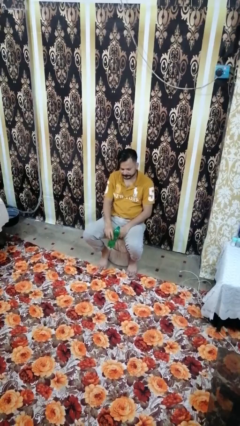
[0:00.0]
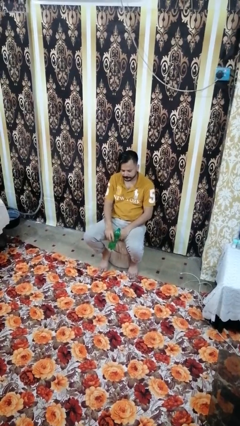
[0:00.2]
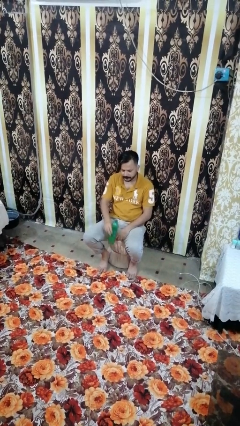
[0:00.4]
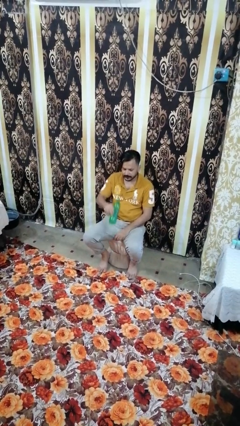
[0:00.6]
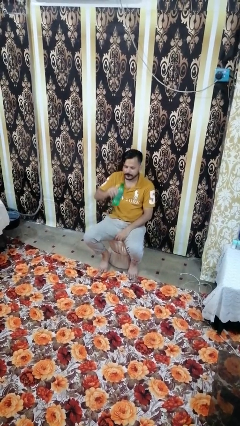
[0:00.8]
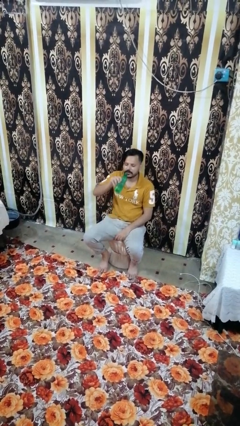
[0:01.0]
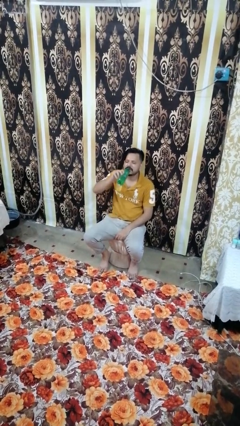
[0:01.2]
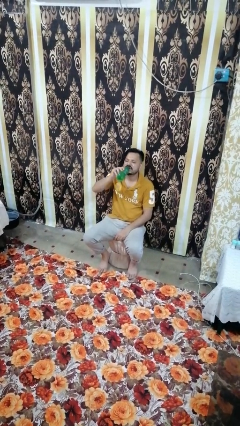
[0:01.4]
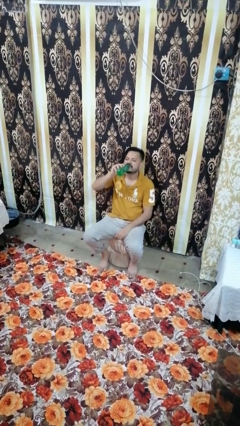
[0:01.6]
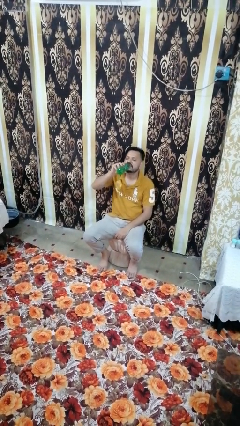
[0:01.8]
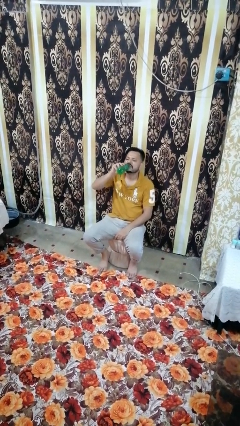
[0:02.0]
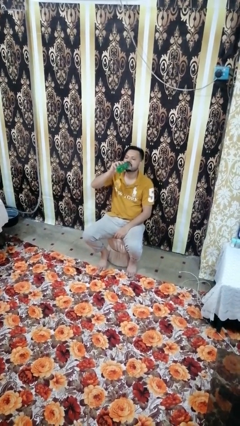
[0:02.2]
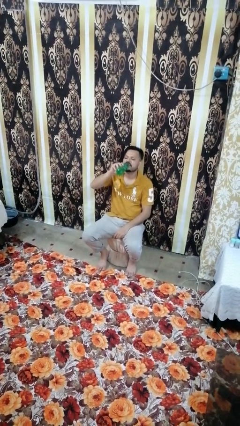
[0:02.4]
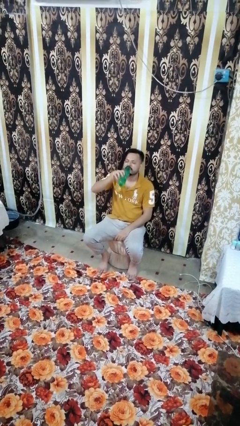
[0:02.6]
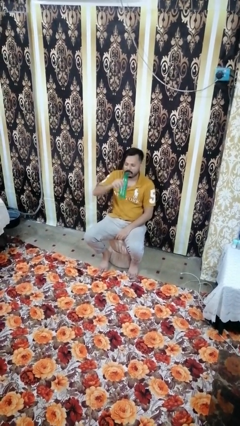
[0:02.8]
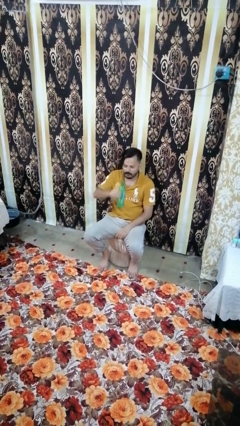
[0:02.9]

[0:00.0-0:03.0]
person drinks from bottle

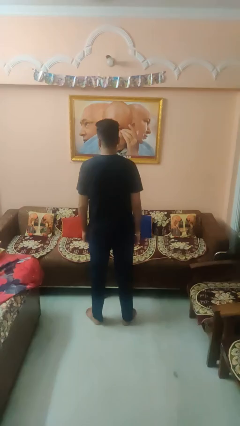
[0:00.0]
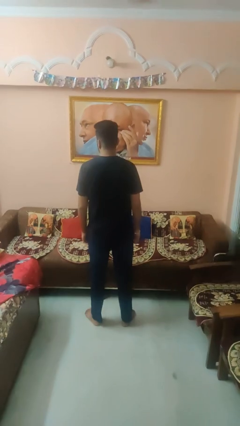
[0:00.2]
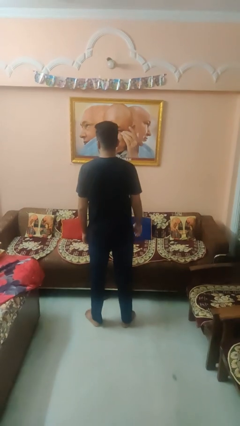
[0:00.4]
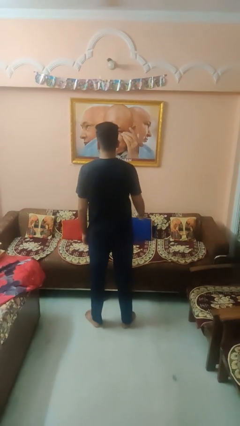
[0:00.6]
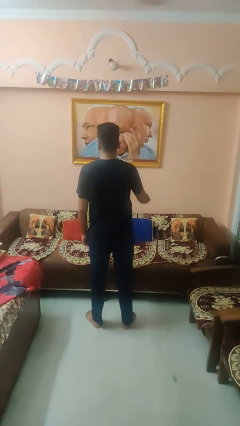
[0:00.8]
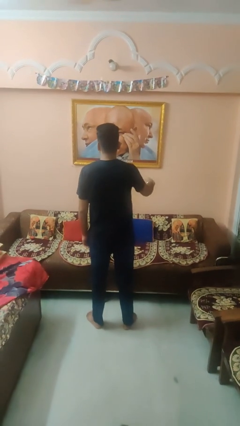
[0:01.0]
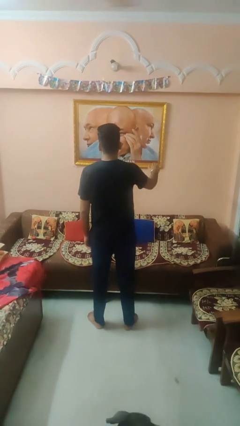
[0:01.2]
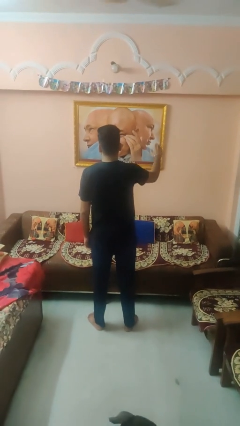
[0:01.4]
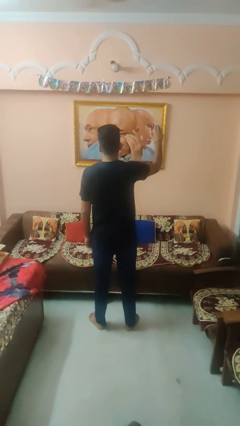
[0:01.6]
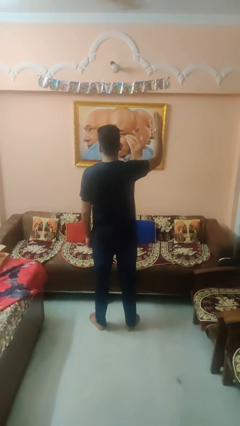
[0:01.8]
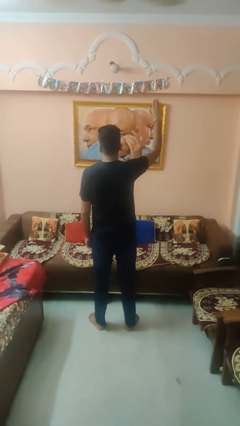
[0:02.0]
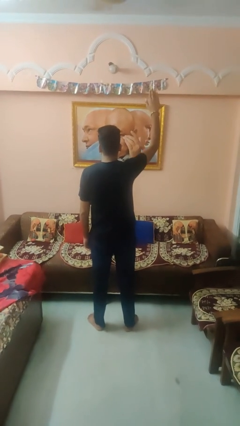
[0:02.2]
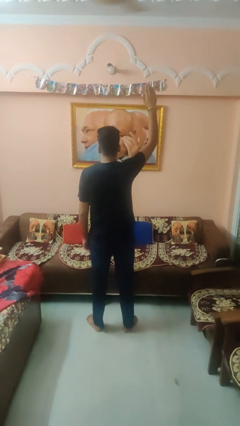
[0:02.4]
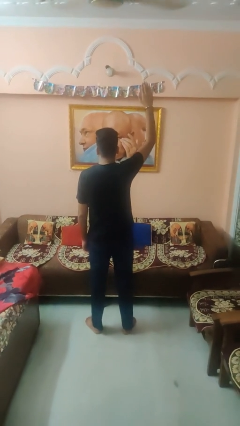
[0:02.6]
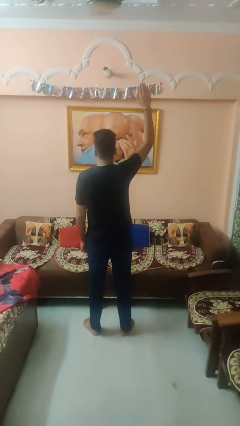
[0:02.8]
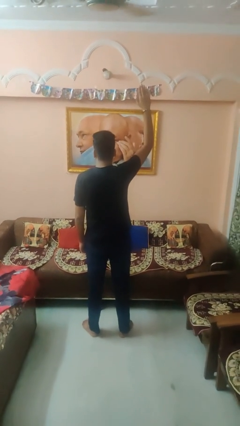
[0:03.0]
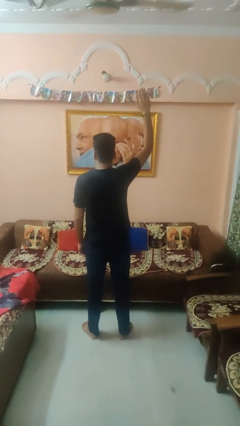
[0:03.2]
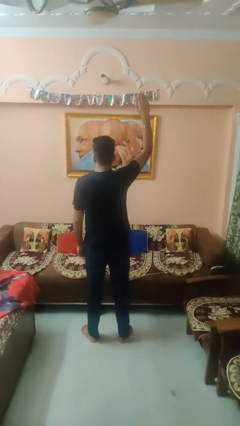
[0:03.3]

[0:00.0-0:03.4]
person gestures raise hand

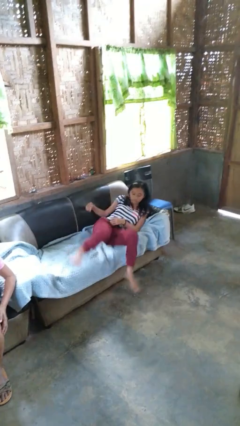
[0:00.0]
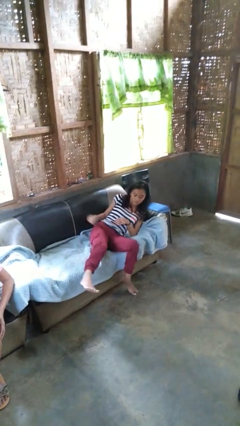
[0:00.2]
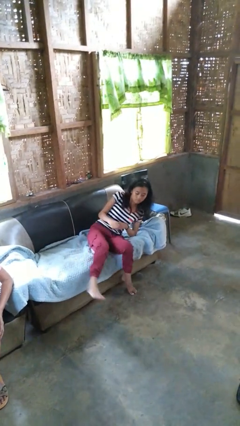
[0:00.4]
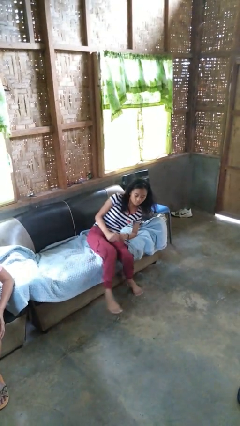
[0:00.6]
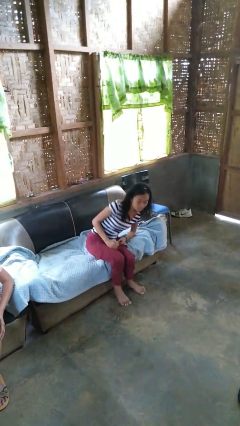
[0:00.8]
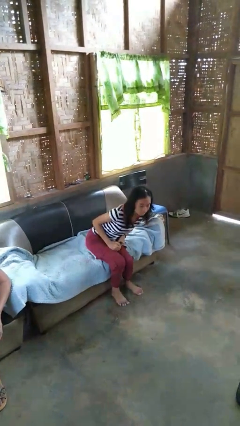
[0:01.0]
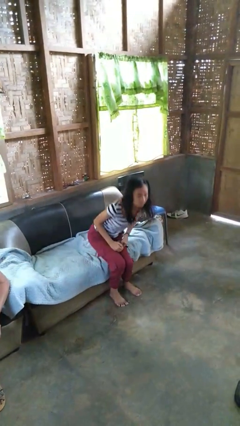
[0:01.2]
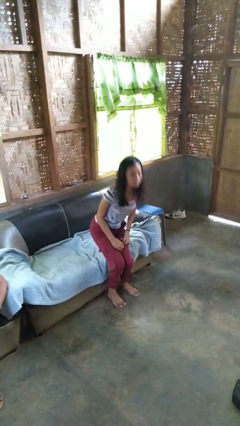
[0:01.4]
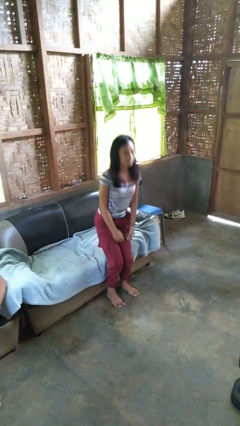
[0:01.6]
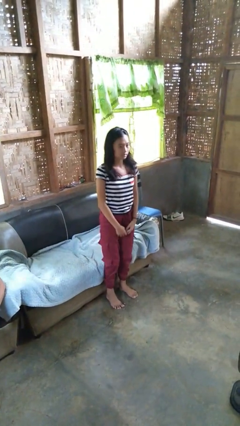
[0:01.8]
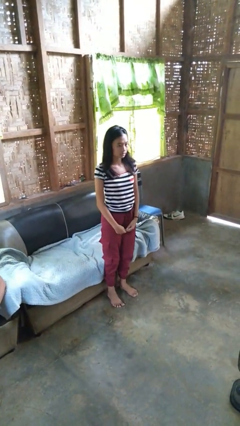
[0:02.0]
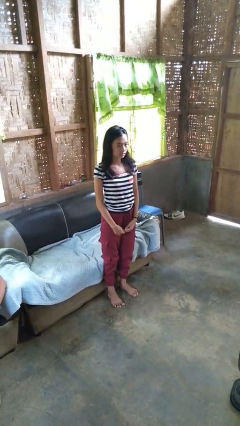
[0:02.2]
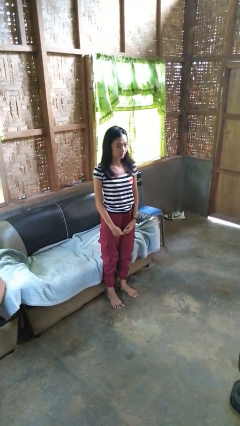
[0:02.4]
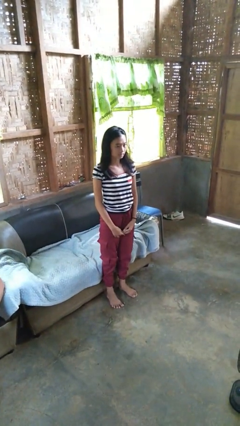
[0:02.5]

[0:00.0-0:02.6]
person stands up

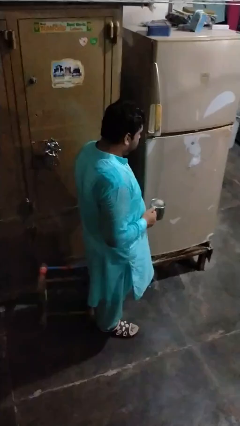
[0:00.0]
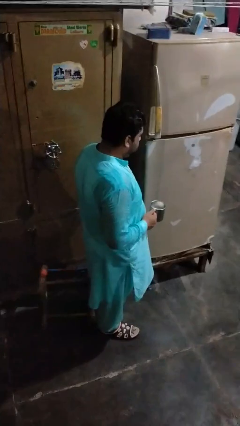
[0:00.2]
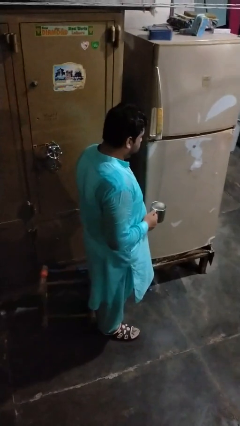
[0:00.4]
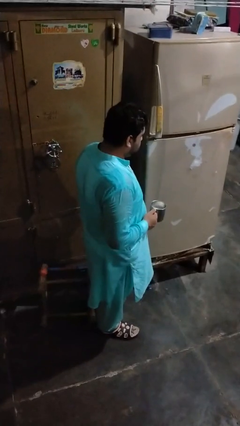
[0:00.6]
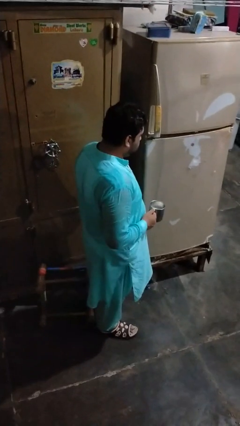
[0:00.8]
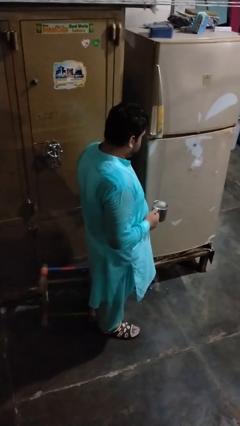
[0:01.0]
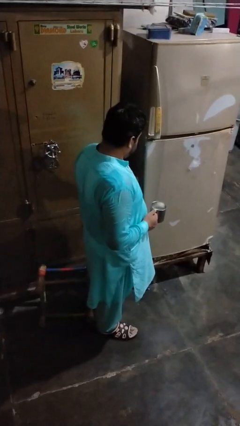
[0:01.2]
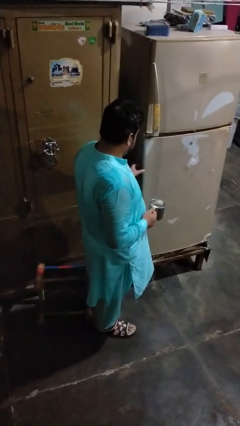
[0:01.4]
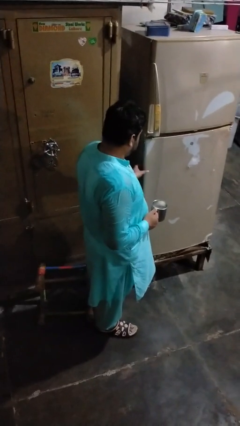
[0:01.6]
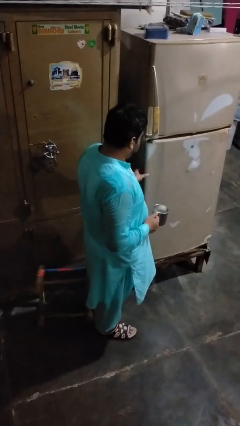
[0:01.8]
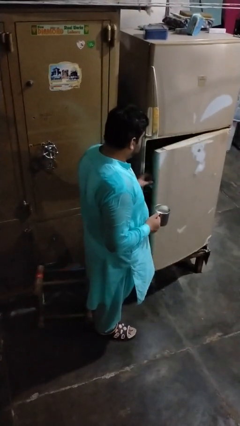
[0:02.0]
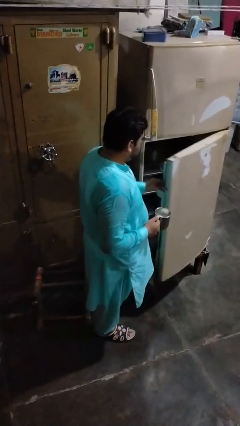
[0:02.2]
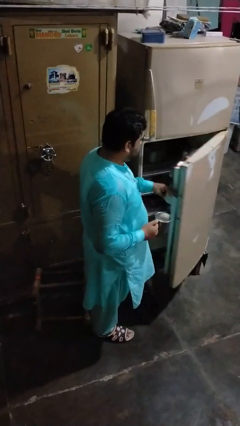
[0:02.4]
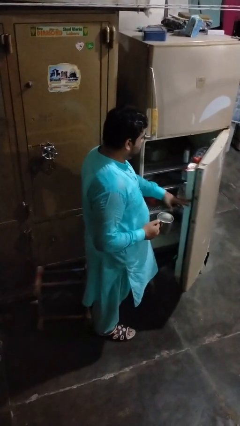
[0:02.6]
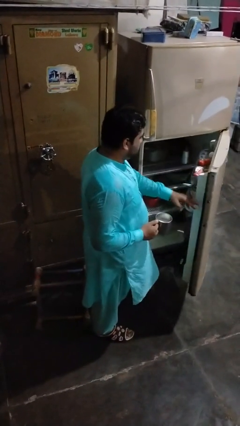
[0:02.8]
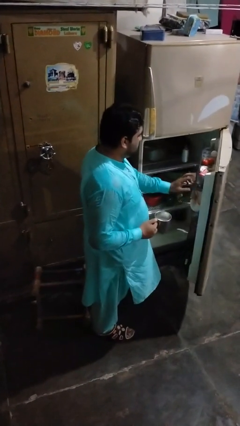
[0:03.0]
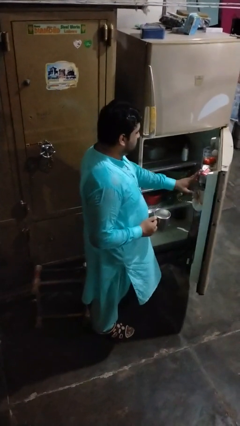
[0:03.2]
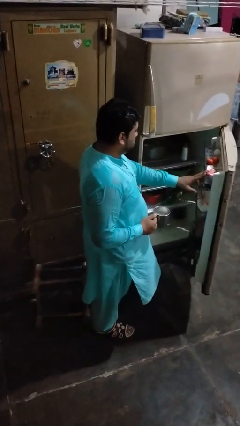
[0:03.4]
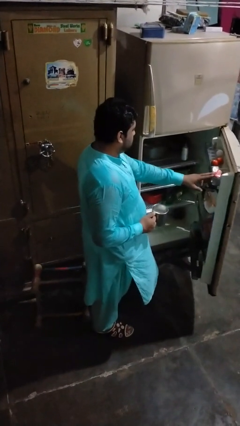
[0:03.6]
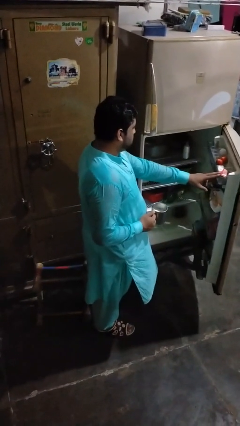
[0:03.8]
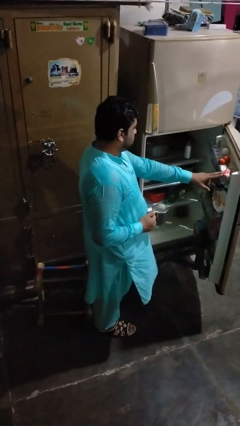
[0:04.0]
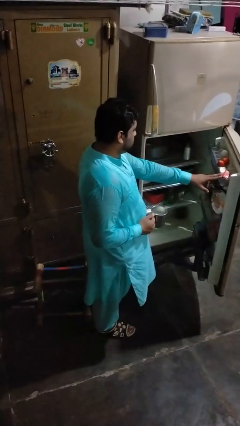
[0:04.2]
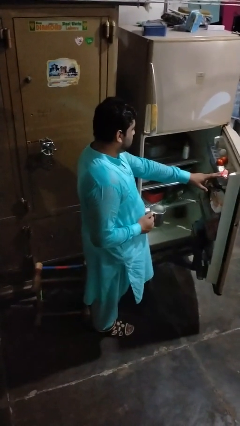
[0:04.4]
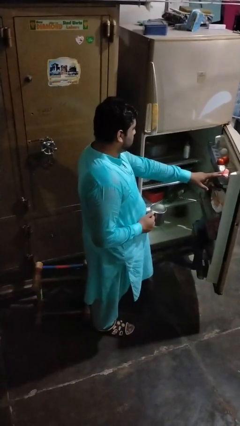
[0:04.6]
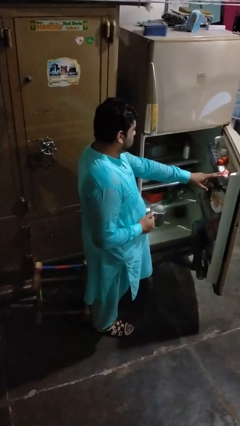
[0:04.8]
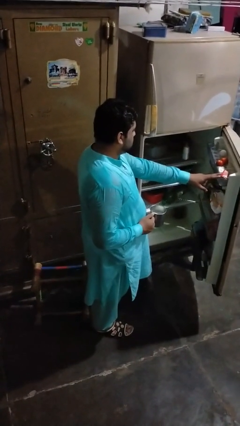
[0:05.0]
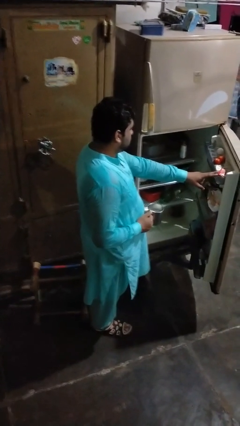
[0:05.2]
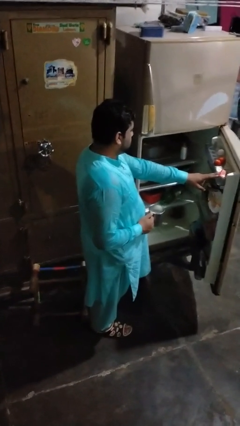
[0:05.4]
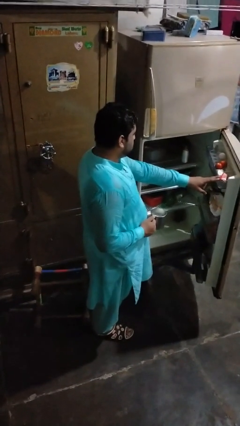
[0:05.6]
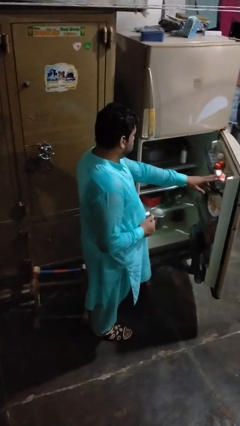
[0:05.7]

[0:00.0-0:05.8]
person opens refrigerator

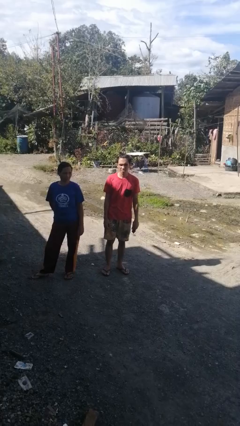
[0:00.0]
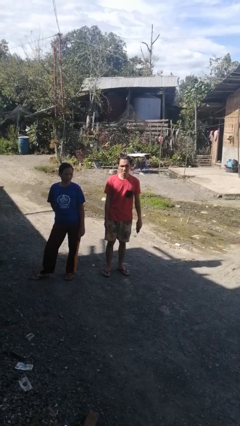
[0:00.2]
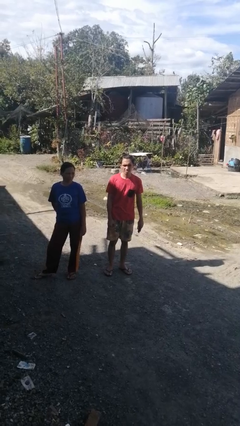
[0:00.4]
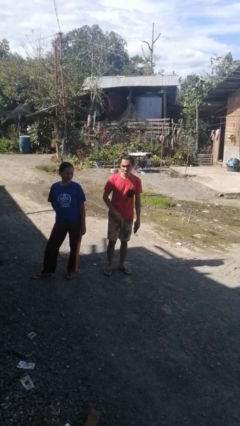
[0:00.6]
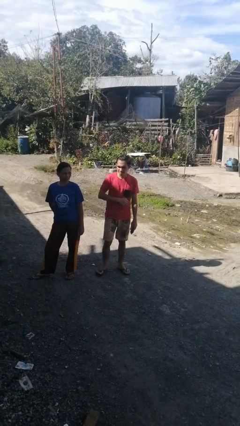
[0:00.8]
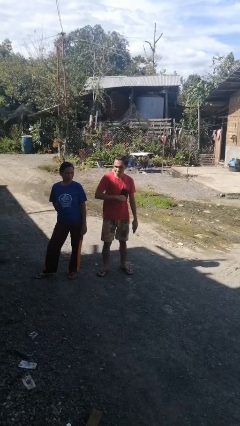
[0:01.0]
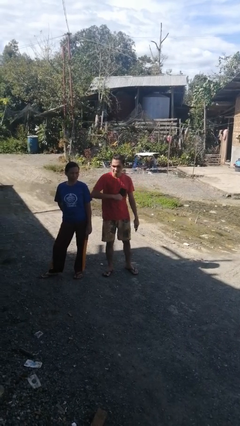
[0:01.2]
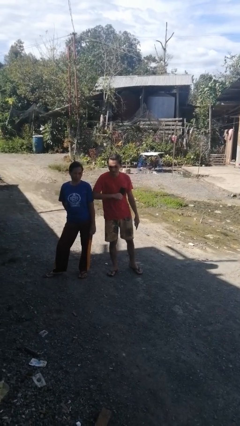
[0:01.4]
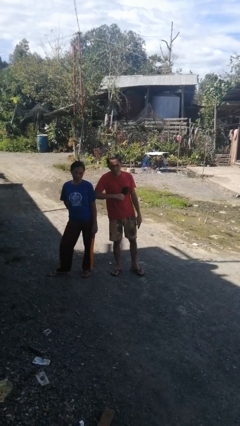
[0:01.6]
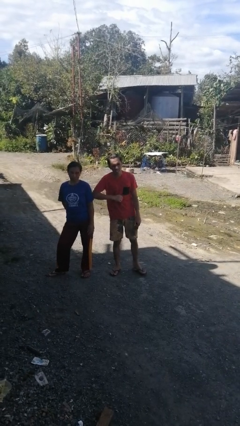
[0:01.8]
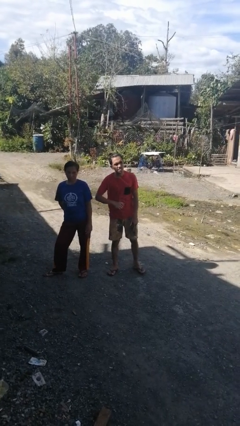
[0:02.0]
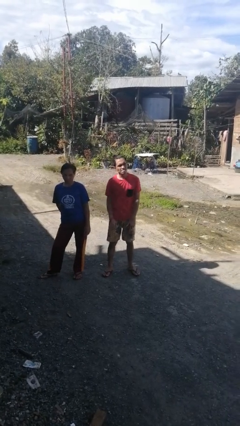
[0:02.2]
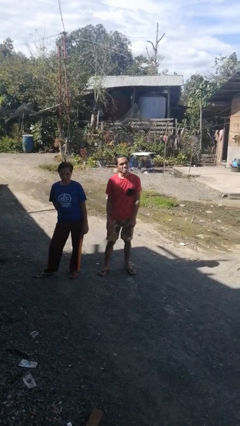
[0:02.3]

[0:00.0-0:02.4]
person nudges person with elbow
